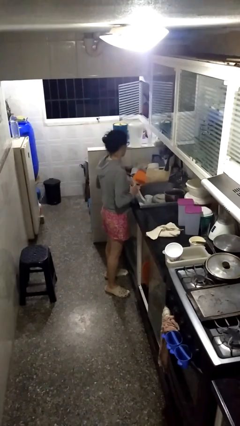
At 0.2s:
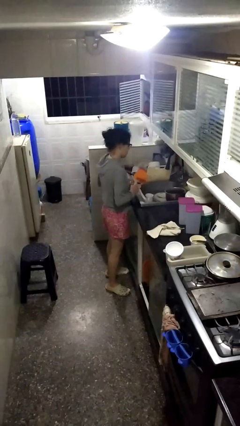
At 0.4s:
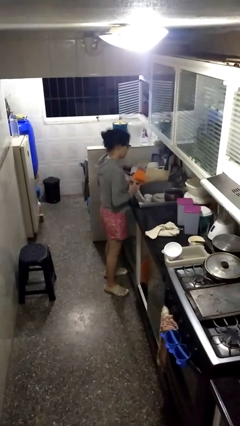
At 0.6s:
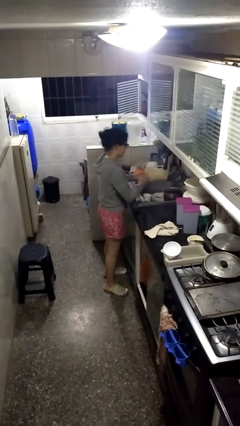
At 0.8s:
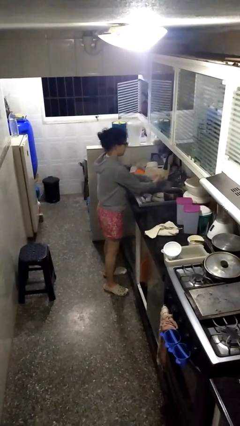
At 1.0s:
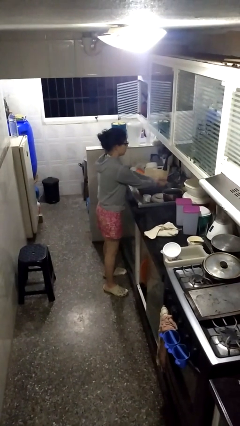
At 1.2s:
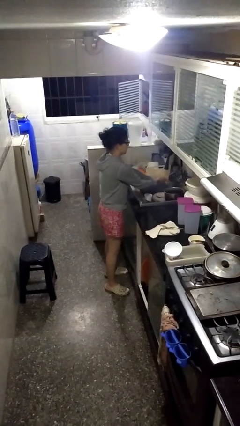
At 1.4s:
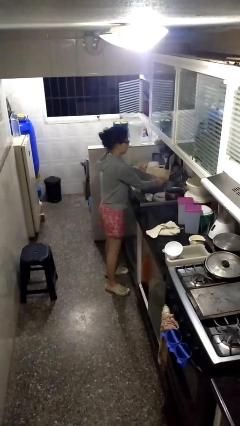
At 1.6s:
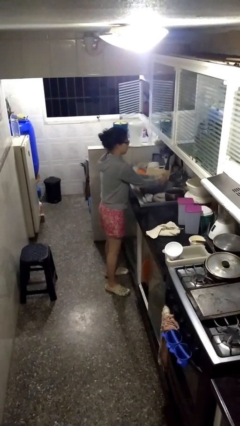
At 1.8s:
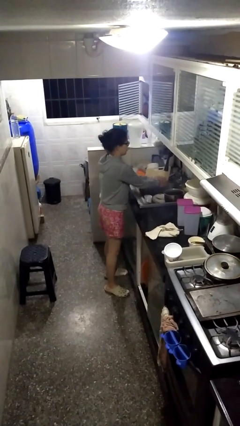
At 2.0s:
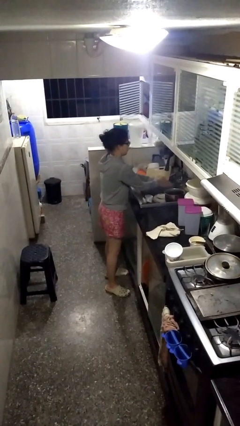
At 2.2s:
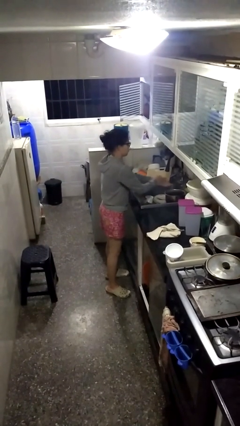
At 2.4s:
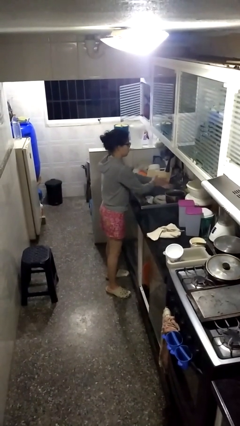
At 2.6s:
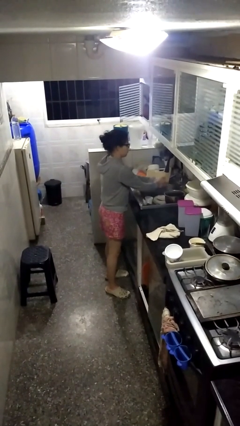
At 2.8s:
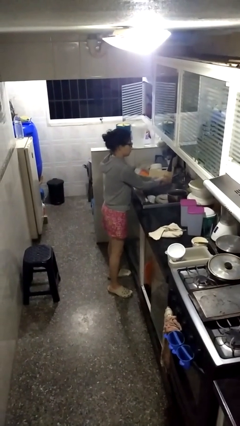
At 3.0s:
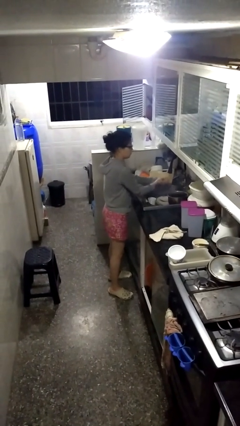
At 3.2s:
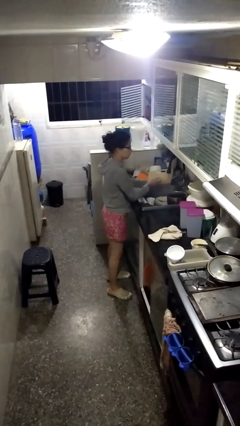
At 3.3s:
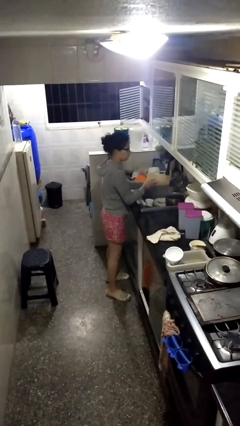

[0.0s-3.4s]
person washes hands

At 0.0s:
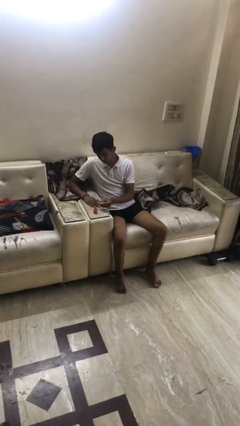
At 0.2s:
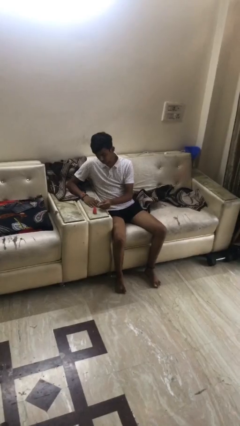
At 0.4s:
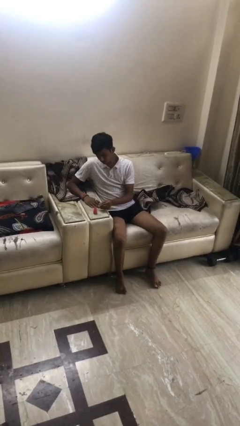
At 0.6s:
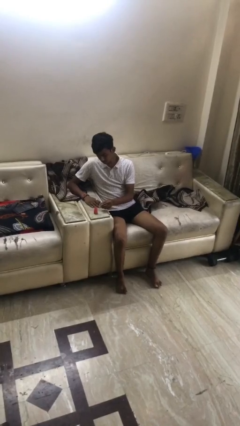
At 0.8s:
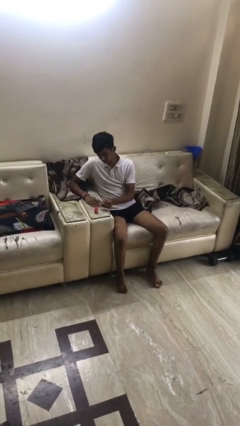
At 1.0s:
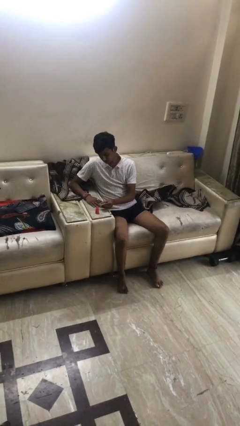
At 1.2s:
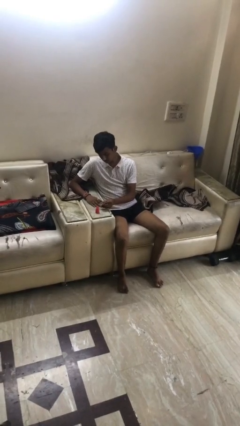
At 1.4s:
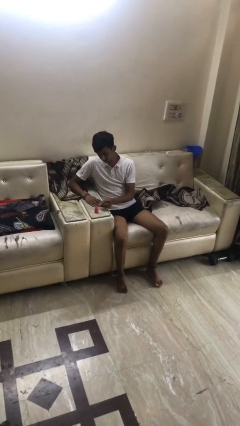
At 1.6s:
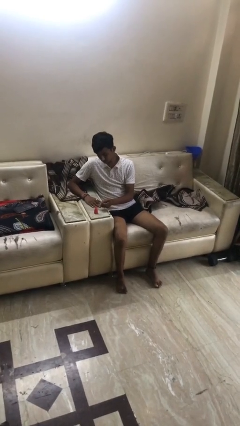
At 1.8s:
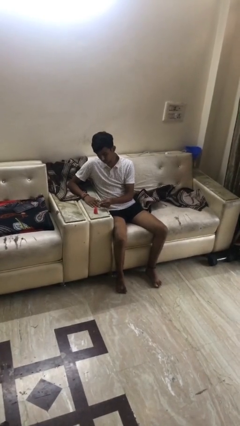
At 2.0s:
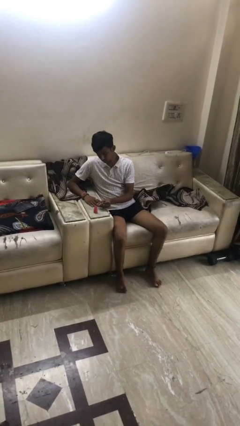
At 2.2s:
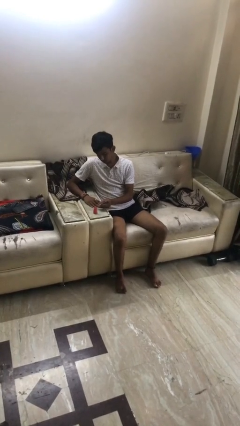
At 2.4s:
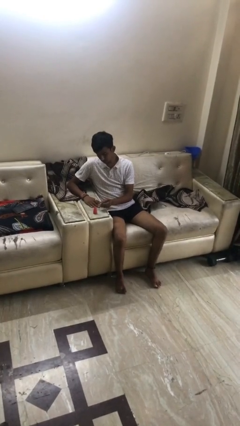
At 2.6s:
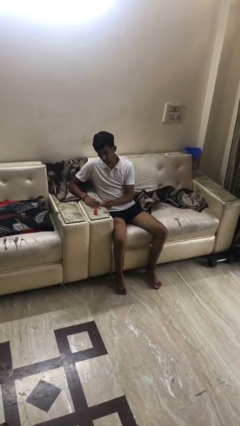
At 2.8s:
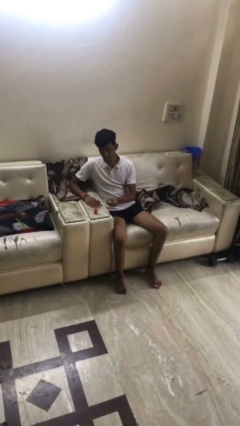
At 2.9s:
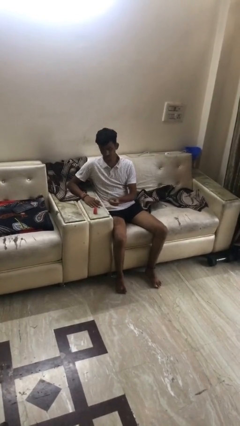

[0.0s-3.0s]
person paints fingernails

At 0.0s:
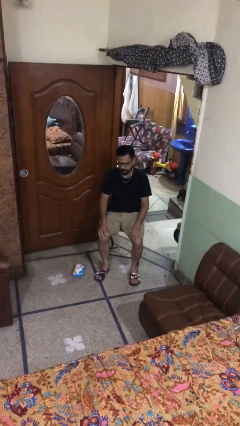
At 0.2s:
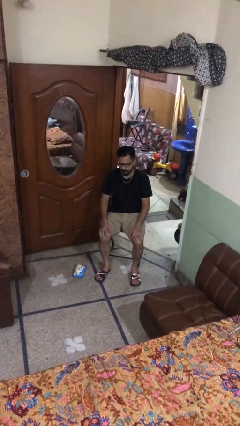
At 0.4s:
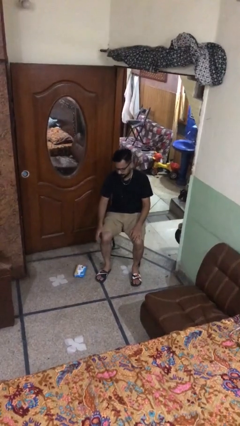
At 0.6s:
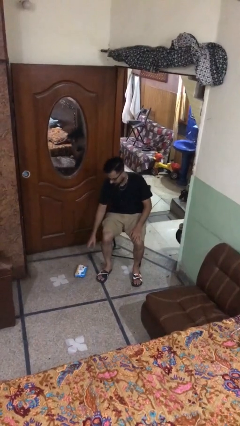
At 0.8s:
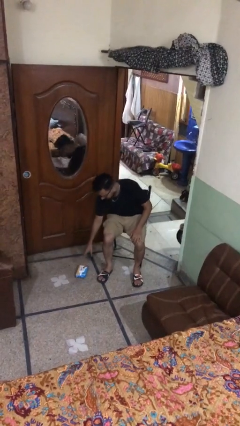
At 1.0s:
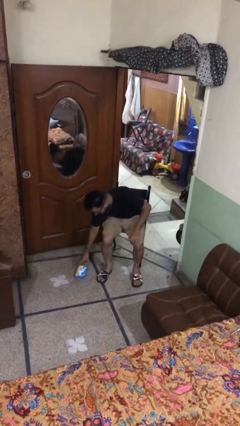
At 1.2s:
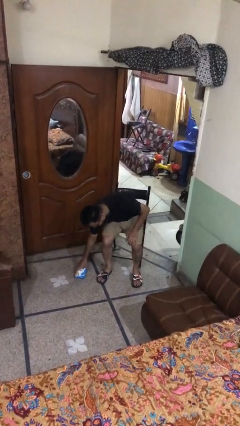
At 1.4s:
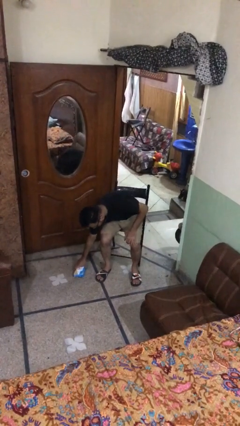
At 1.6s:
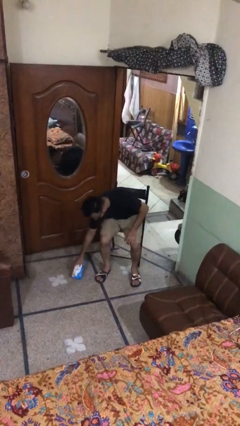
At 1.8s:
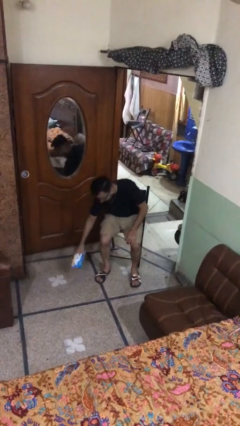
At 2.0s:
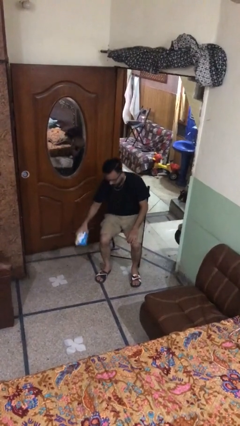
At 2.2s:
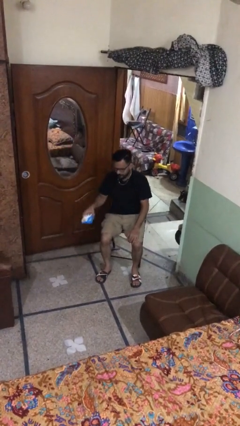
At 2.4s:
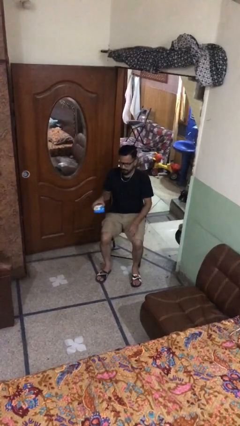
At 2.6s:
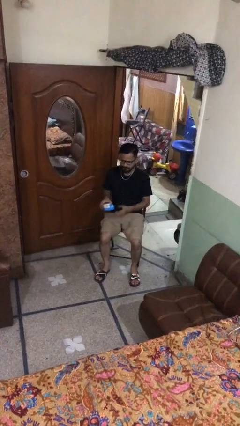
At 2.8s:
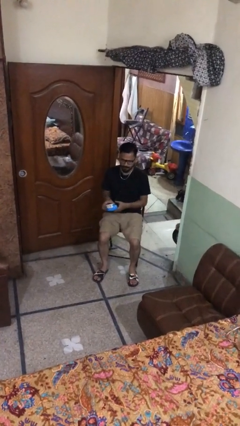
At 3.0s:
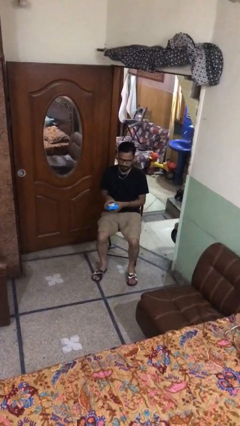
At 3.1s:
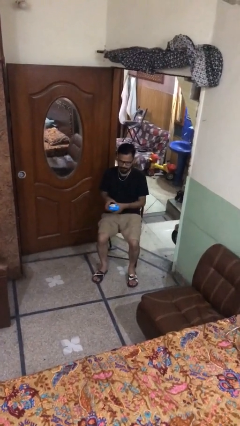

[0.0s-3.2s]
person picks up object from floor

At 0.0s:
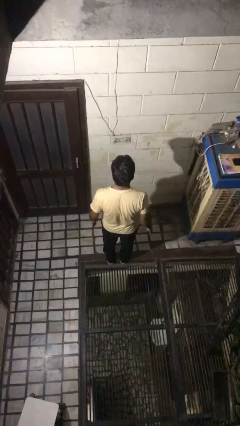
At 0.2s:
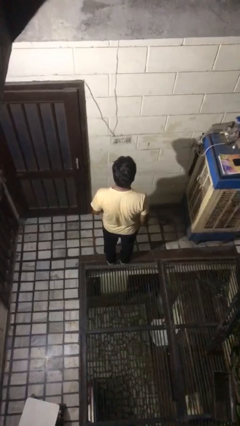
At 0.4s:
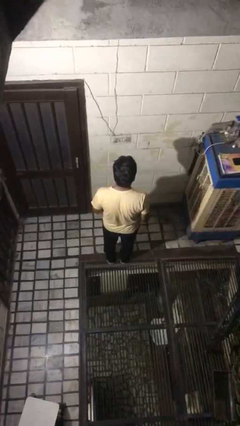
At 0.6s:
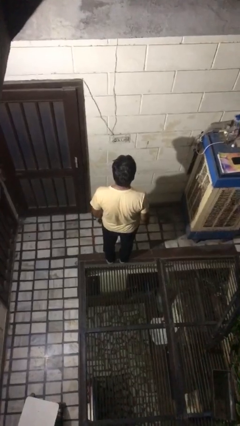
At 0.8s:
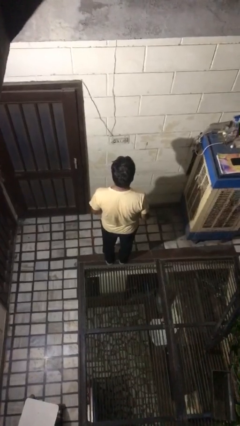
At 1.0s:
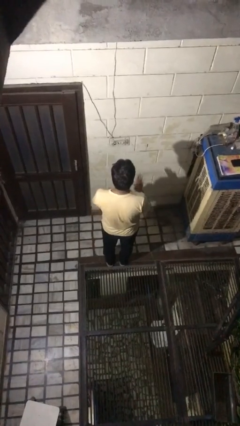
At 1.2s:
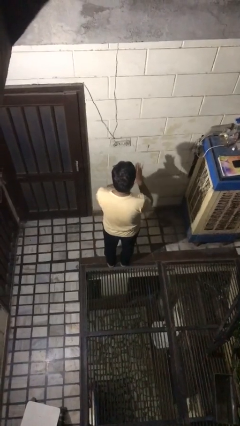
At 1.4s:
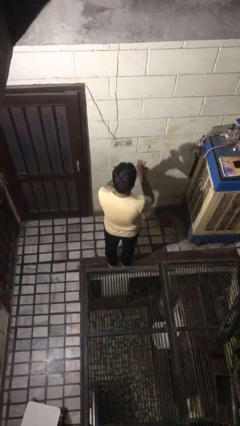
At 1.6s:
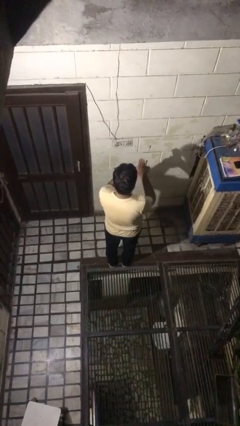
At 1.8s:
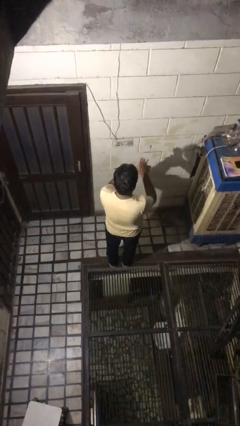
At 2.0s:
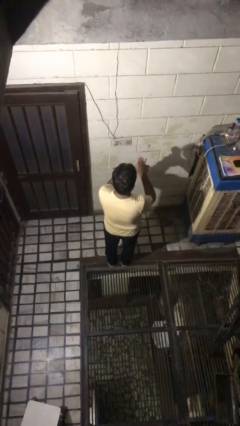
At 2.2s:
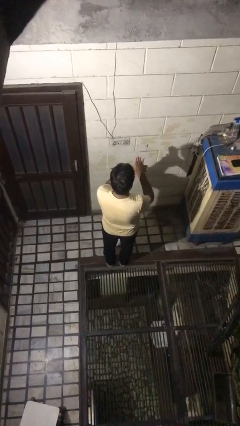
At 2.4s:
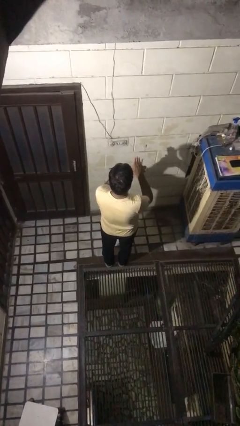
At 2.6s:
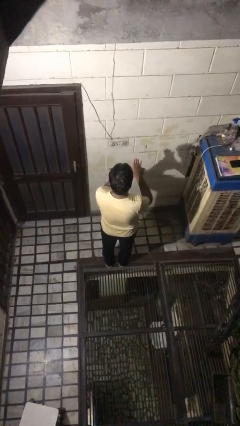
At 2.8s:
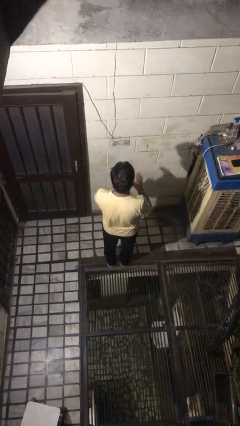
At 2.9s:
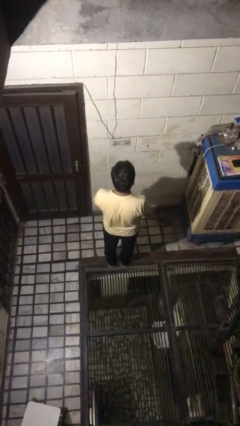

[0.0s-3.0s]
person gestures number four

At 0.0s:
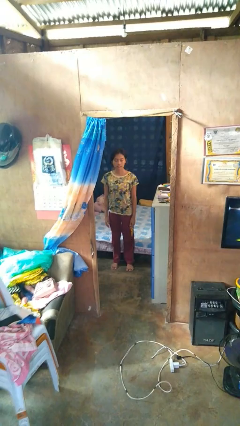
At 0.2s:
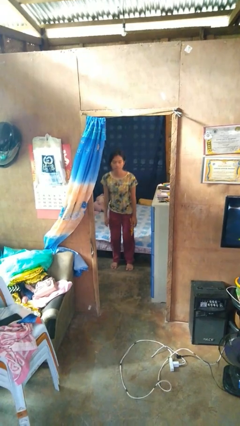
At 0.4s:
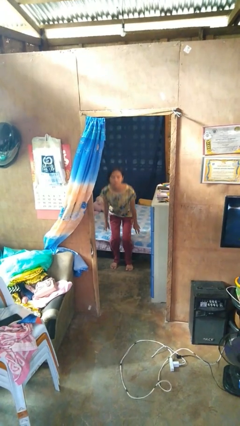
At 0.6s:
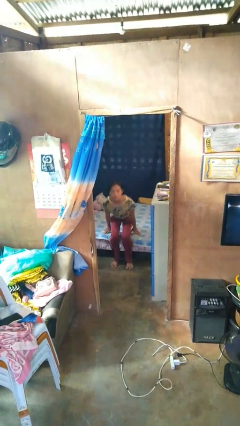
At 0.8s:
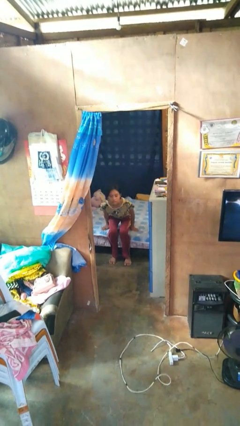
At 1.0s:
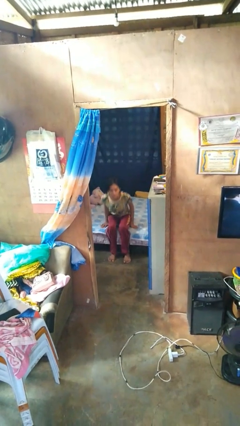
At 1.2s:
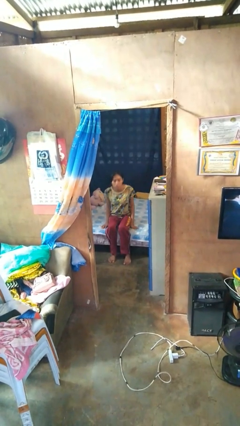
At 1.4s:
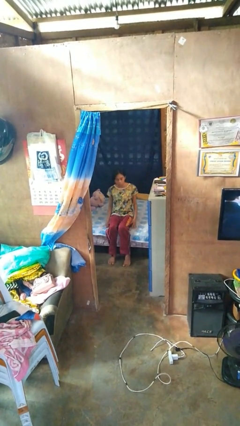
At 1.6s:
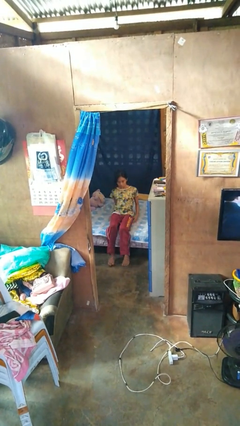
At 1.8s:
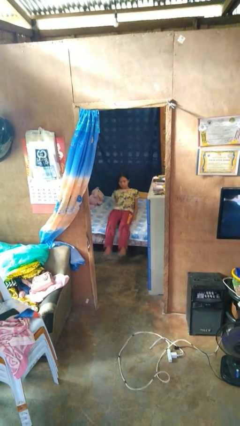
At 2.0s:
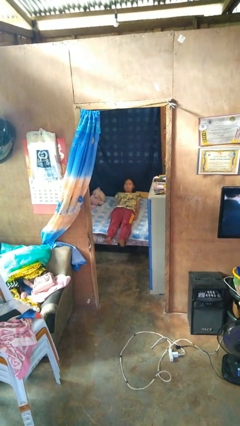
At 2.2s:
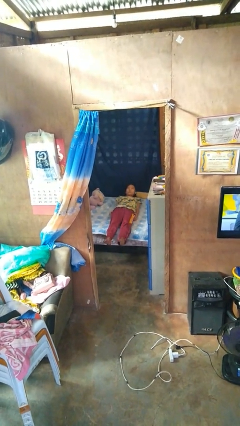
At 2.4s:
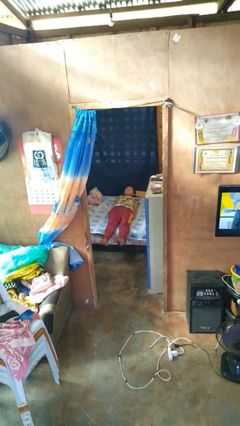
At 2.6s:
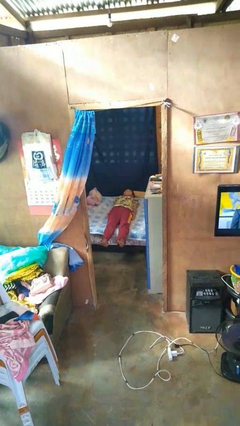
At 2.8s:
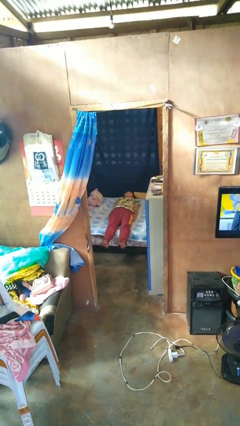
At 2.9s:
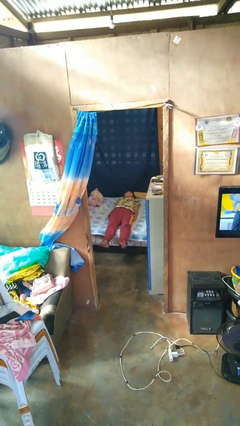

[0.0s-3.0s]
person lies down on bed

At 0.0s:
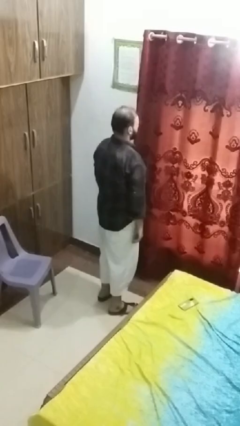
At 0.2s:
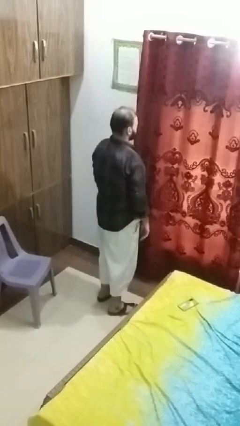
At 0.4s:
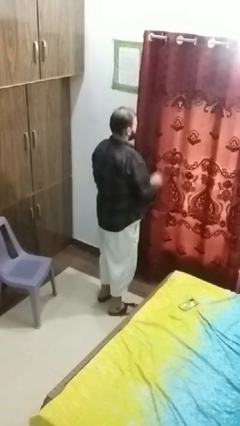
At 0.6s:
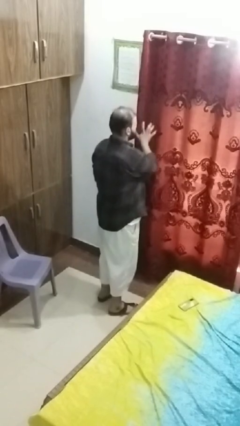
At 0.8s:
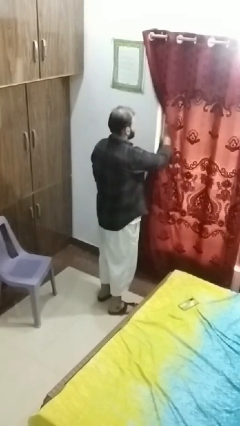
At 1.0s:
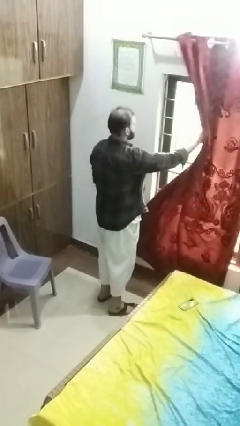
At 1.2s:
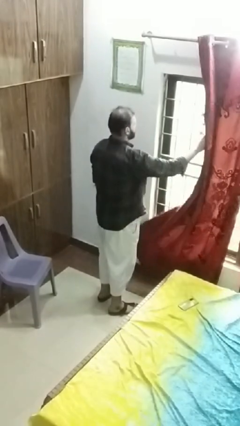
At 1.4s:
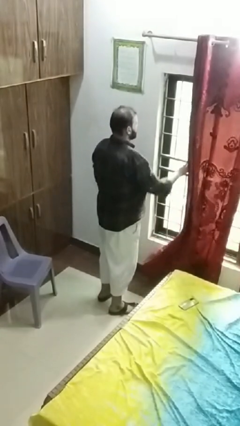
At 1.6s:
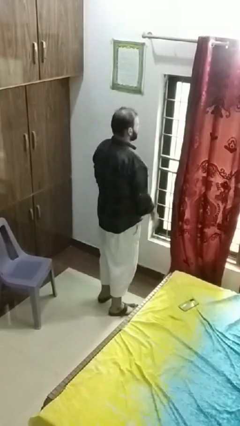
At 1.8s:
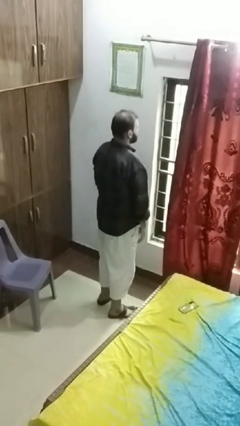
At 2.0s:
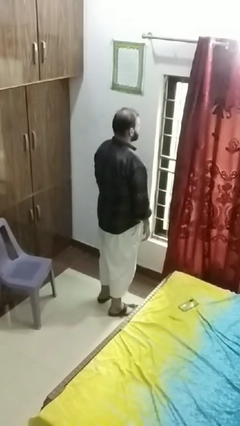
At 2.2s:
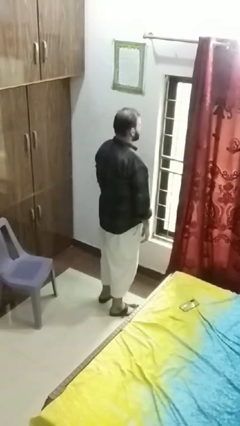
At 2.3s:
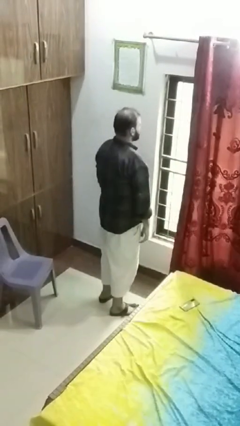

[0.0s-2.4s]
person opens curtains
